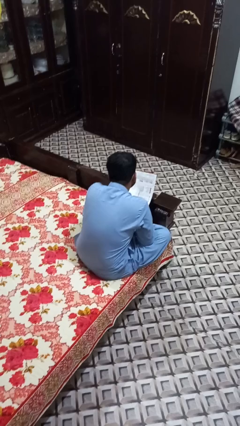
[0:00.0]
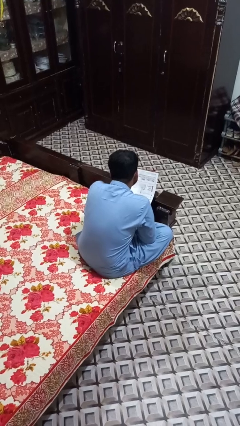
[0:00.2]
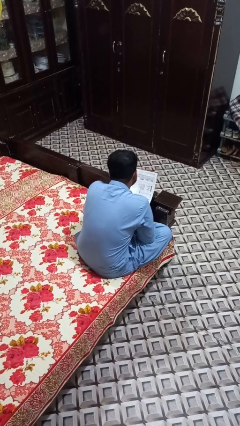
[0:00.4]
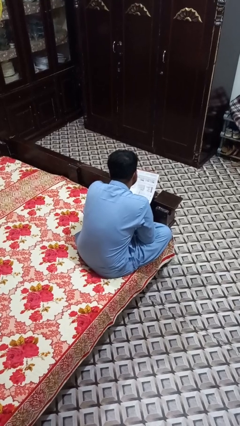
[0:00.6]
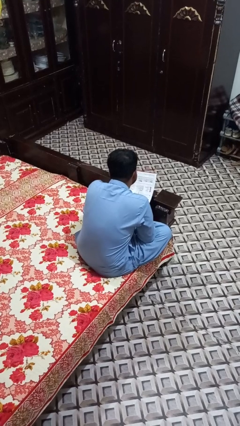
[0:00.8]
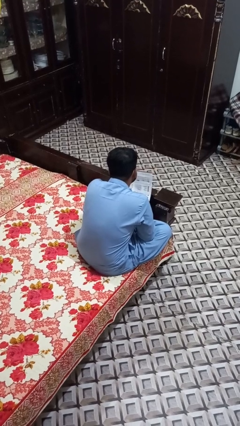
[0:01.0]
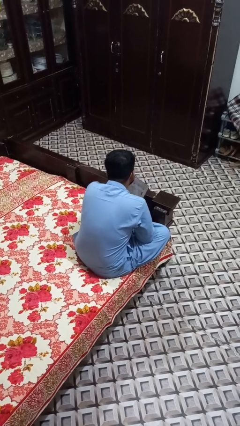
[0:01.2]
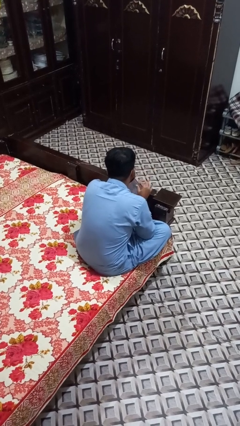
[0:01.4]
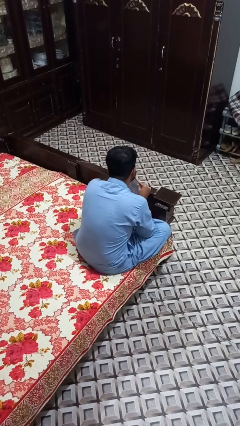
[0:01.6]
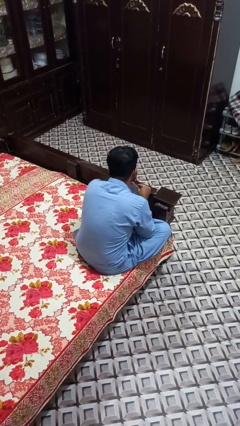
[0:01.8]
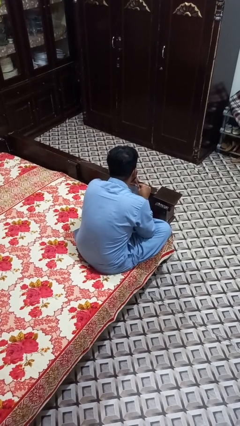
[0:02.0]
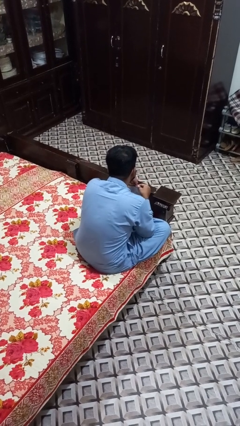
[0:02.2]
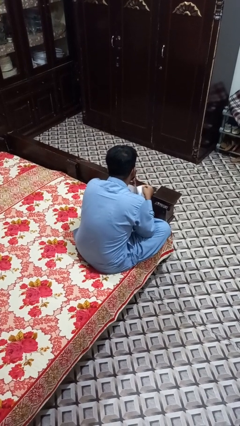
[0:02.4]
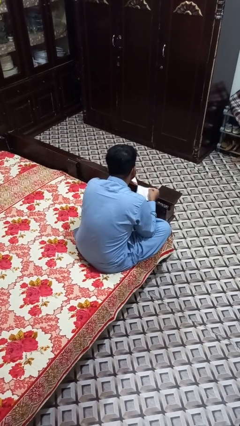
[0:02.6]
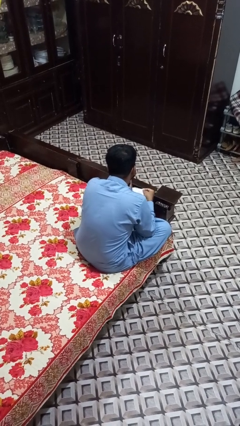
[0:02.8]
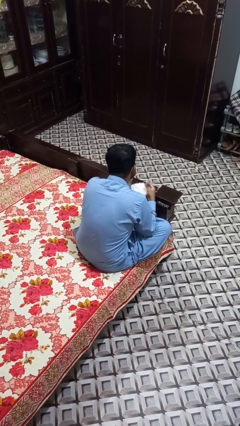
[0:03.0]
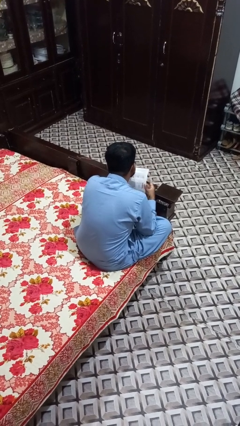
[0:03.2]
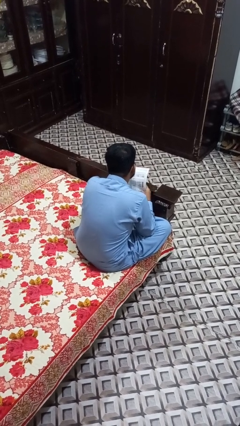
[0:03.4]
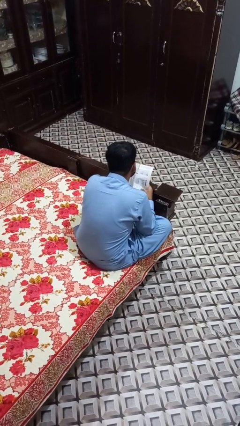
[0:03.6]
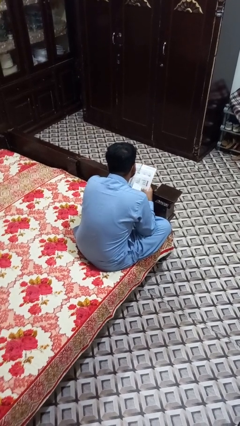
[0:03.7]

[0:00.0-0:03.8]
person tears paper

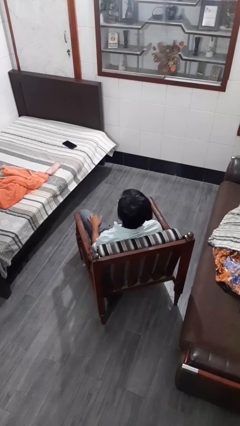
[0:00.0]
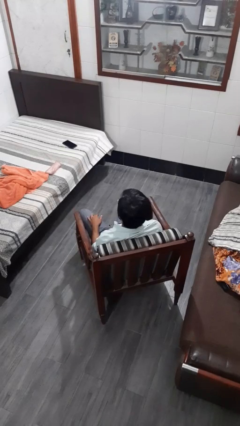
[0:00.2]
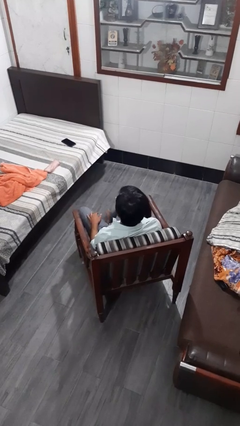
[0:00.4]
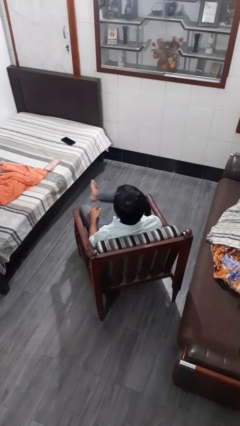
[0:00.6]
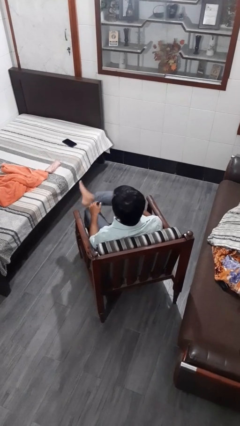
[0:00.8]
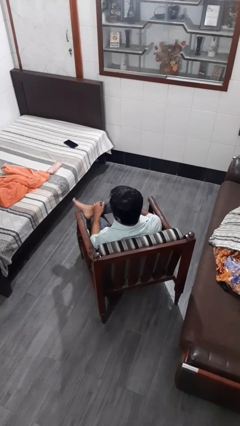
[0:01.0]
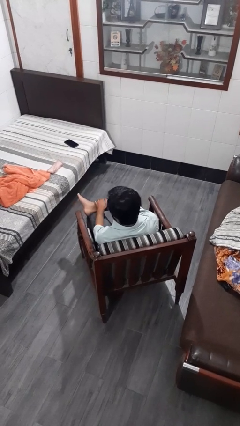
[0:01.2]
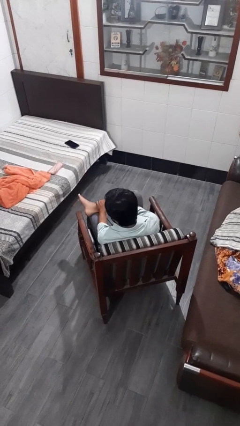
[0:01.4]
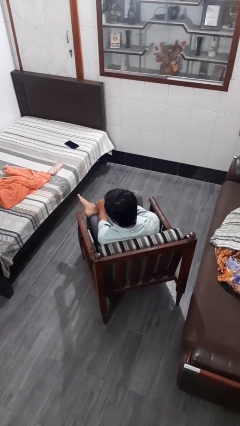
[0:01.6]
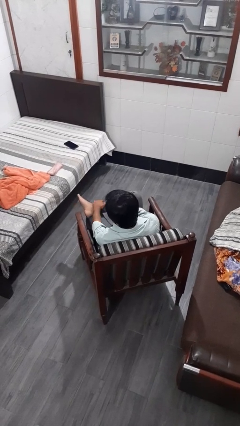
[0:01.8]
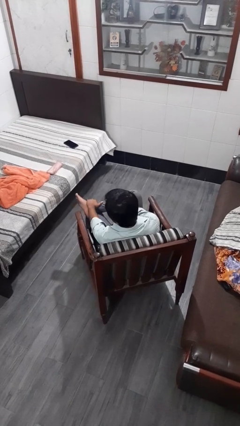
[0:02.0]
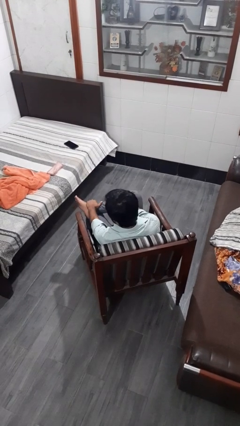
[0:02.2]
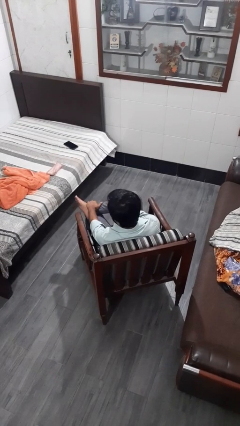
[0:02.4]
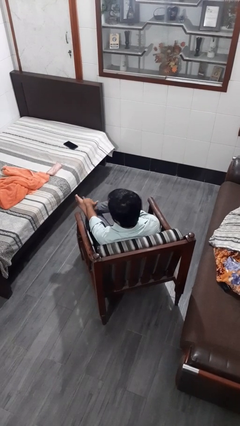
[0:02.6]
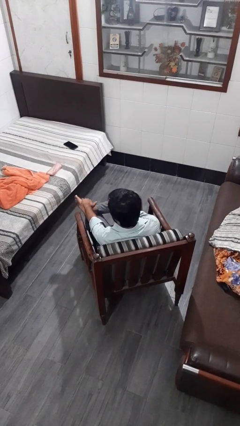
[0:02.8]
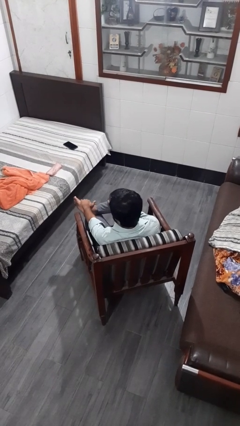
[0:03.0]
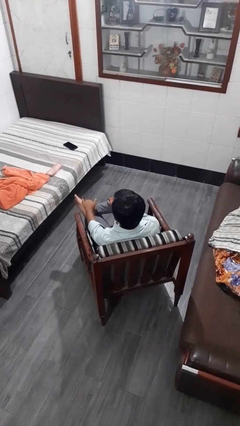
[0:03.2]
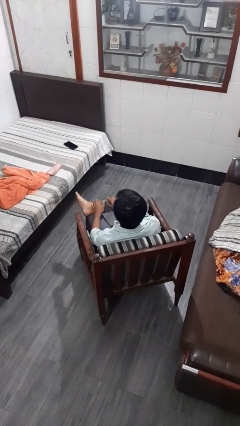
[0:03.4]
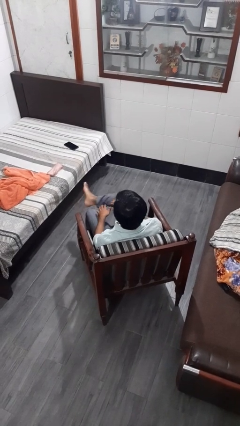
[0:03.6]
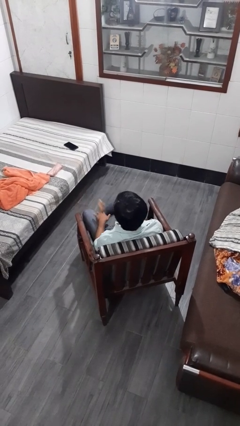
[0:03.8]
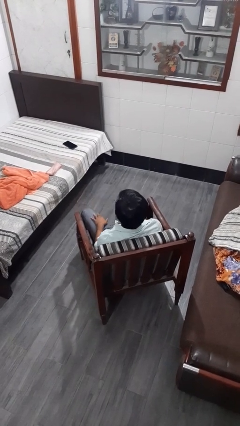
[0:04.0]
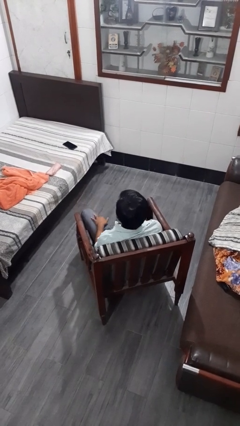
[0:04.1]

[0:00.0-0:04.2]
person rubs foot

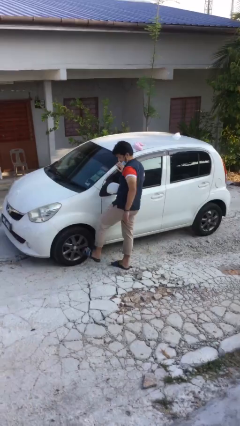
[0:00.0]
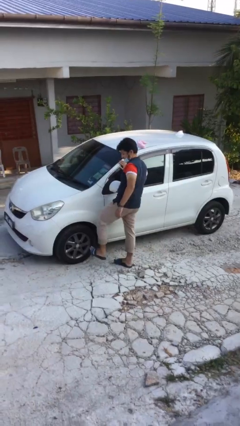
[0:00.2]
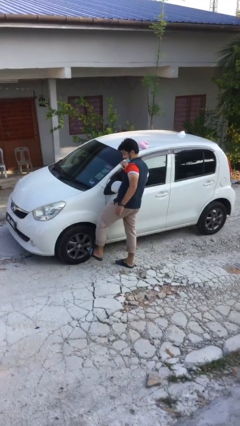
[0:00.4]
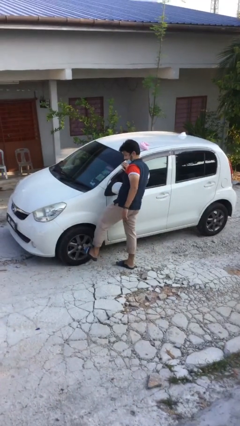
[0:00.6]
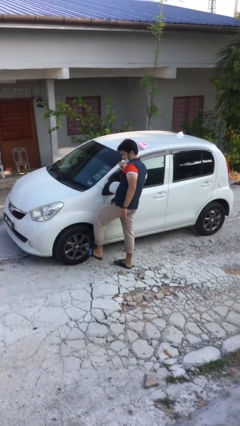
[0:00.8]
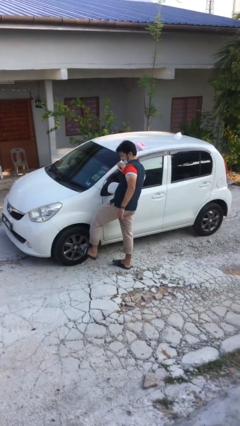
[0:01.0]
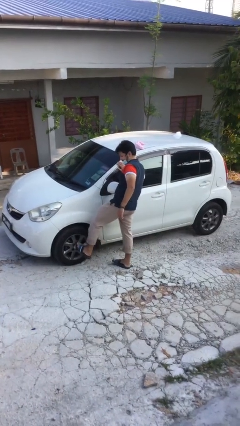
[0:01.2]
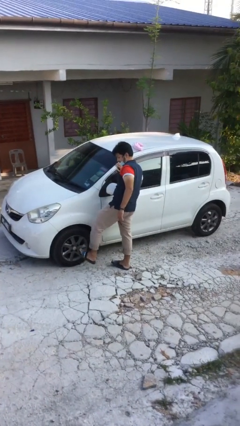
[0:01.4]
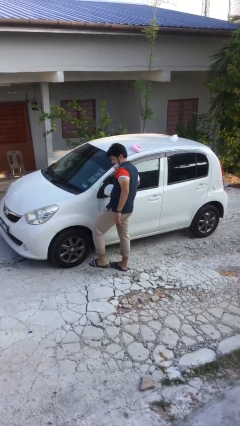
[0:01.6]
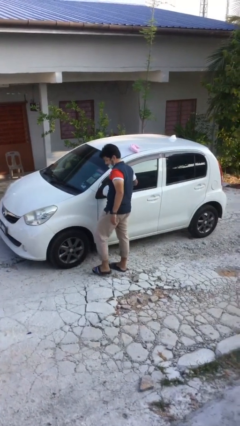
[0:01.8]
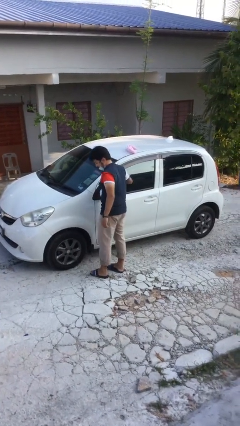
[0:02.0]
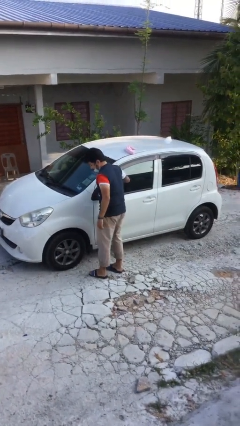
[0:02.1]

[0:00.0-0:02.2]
person kicks car tires

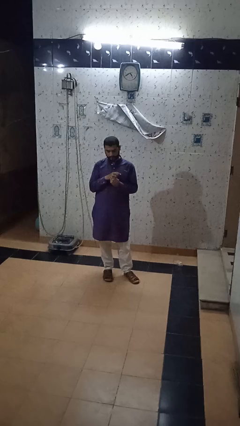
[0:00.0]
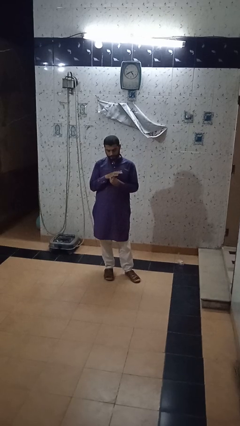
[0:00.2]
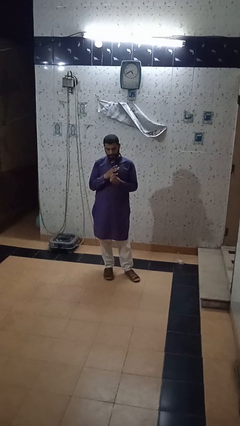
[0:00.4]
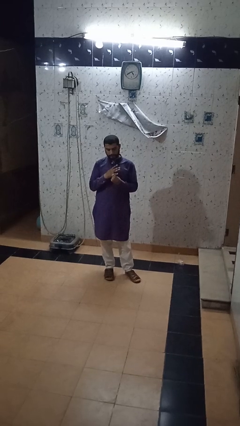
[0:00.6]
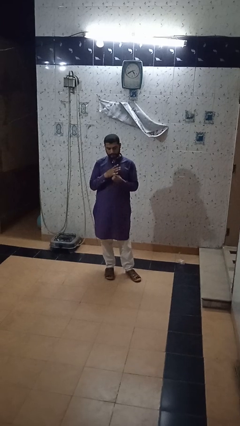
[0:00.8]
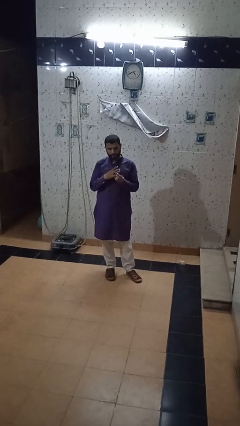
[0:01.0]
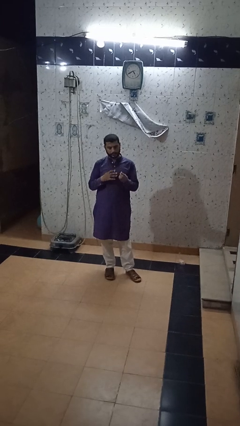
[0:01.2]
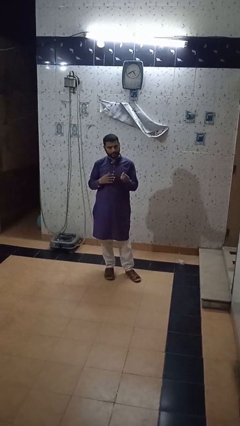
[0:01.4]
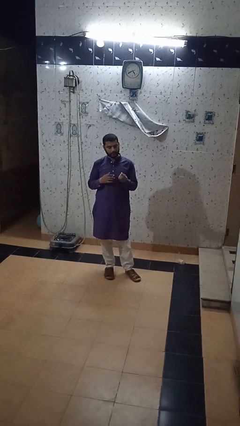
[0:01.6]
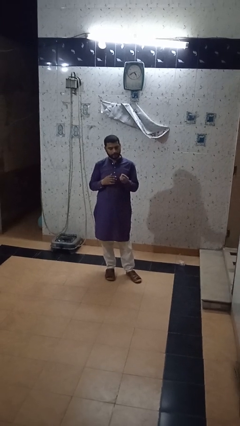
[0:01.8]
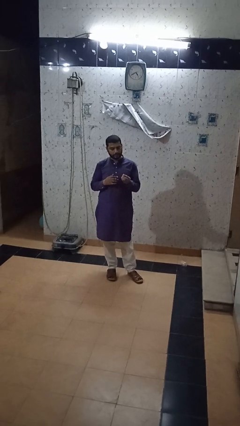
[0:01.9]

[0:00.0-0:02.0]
person takes off ring

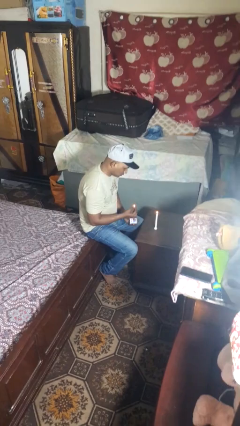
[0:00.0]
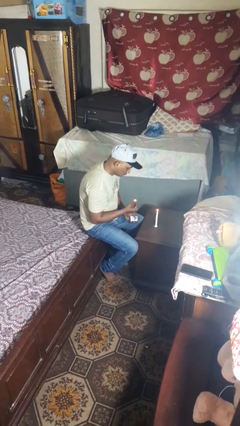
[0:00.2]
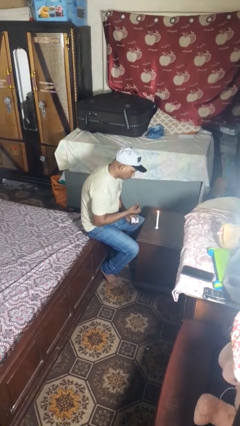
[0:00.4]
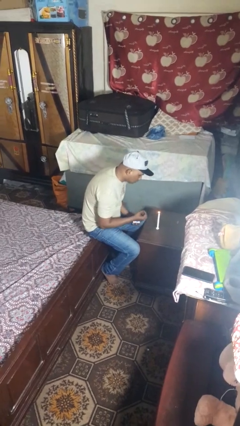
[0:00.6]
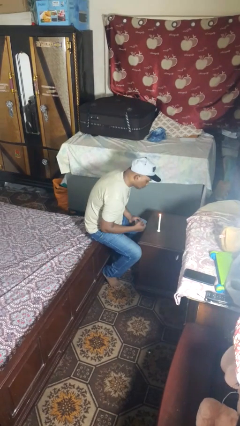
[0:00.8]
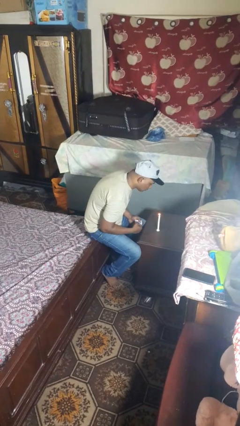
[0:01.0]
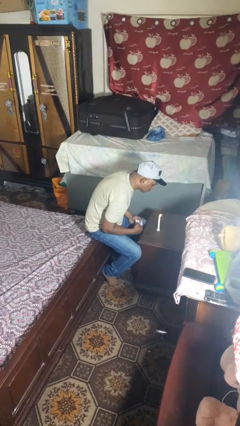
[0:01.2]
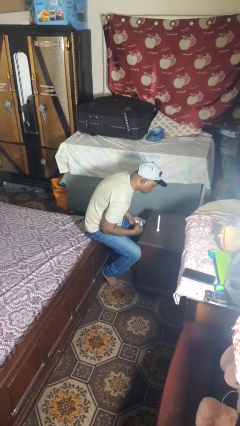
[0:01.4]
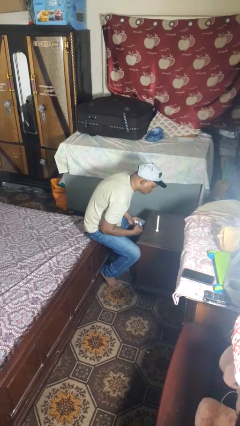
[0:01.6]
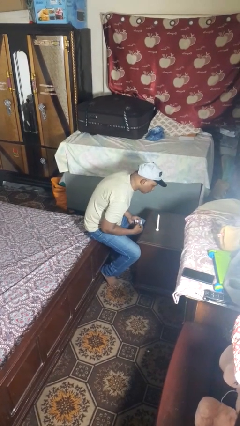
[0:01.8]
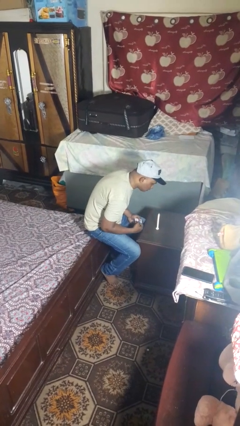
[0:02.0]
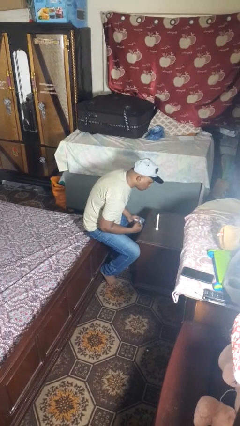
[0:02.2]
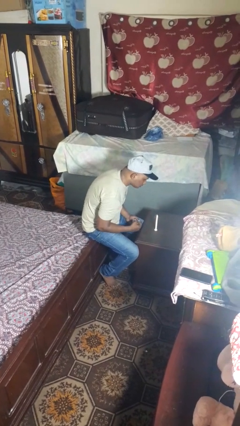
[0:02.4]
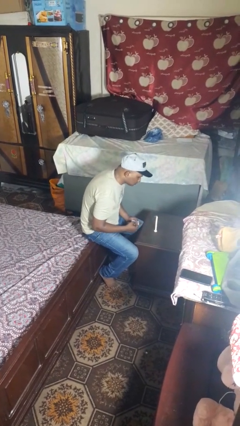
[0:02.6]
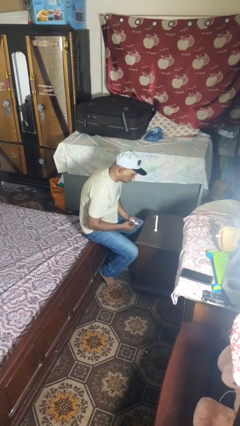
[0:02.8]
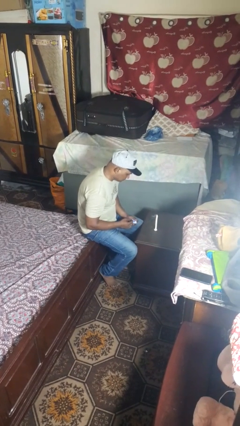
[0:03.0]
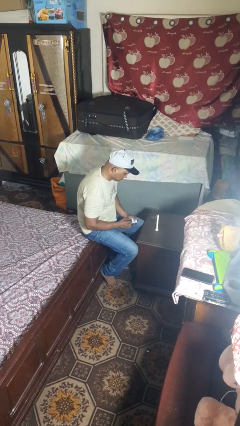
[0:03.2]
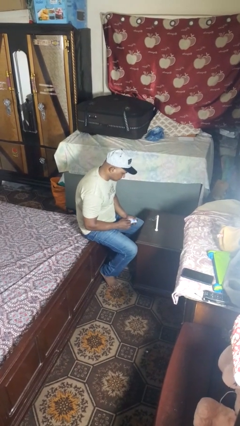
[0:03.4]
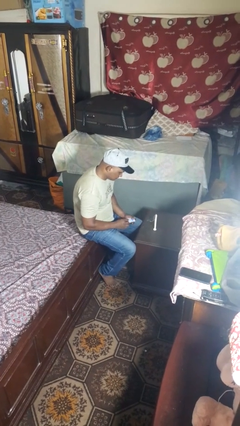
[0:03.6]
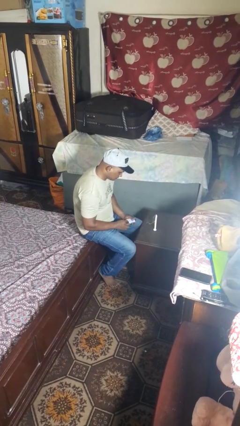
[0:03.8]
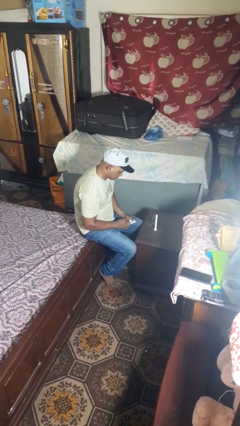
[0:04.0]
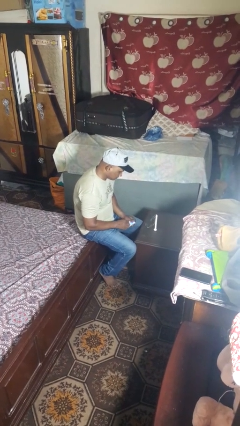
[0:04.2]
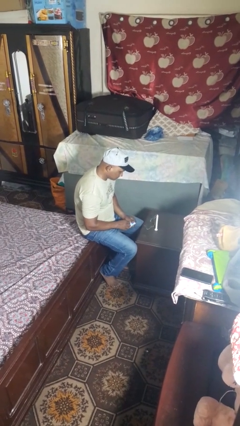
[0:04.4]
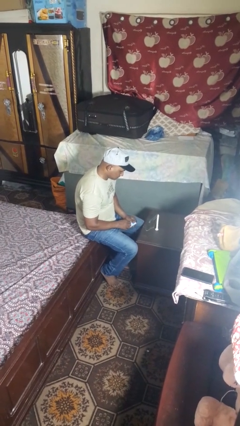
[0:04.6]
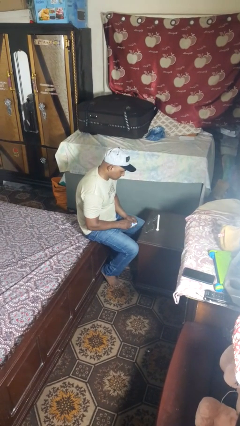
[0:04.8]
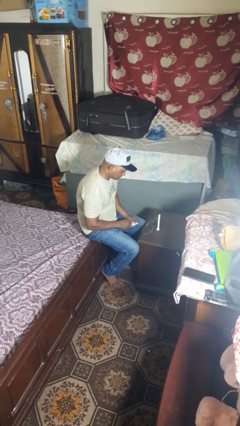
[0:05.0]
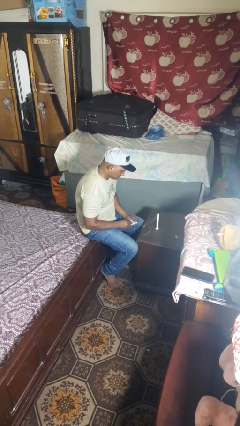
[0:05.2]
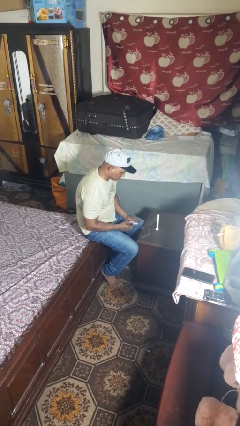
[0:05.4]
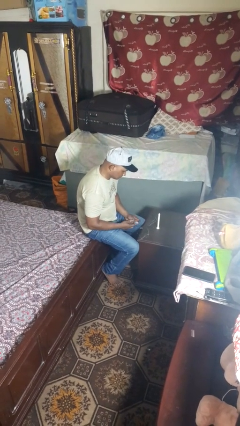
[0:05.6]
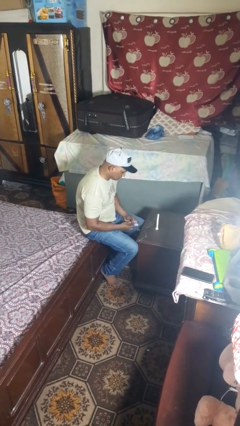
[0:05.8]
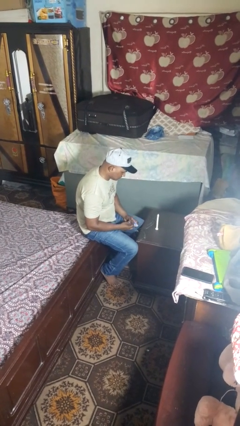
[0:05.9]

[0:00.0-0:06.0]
person extinguishes candle
